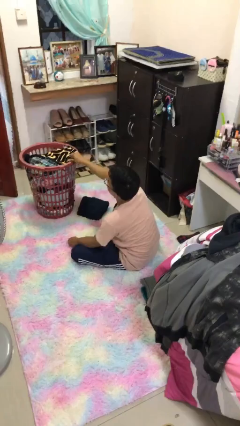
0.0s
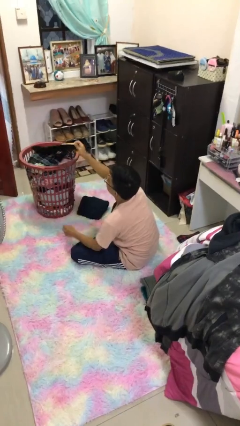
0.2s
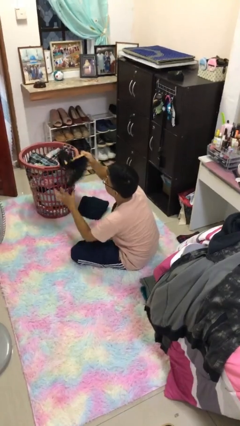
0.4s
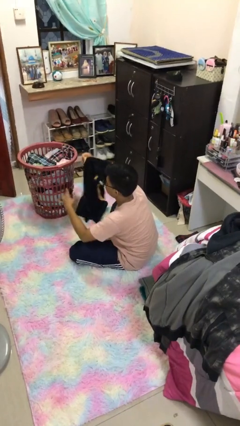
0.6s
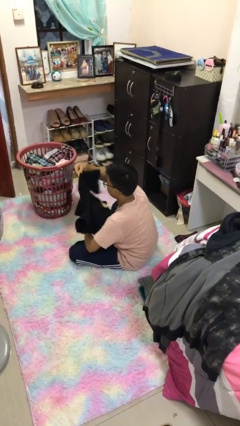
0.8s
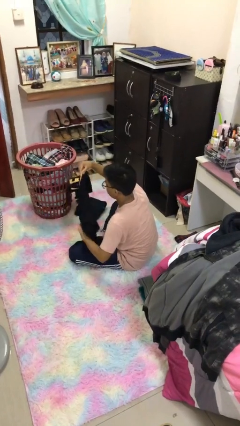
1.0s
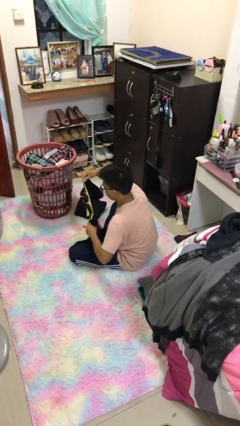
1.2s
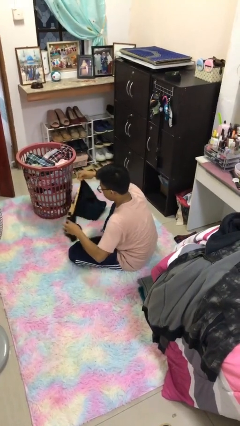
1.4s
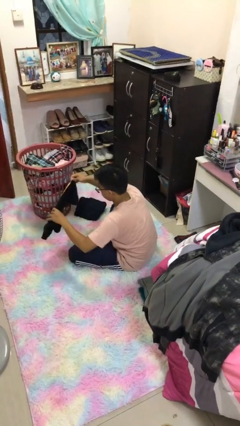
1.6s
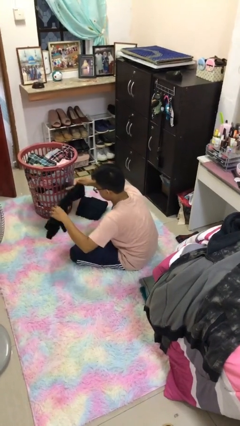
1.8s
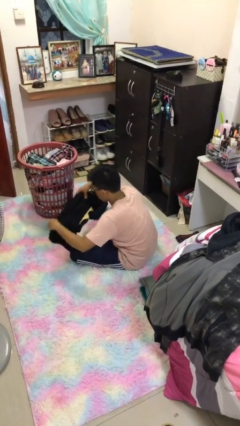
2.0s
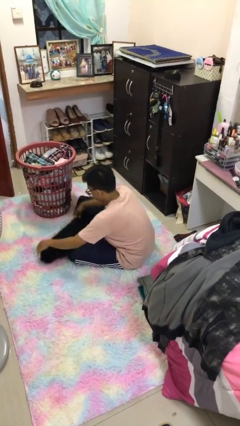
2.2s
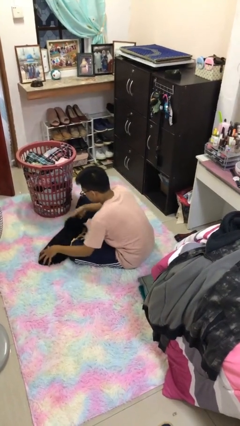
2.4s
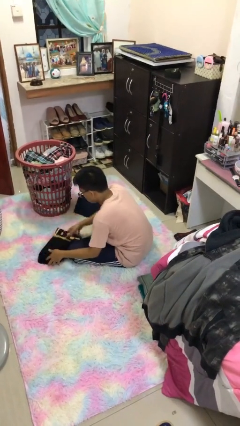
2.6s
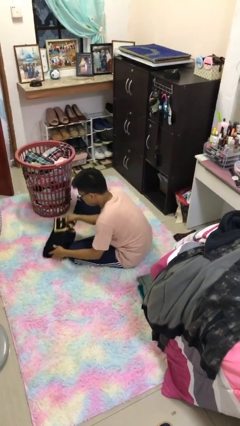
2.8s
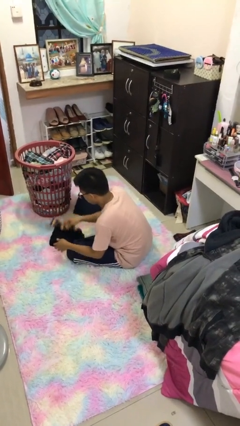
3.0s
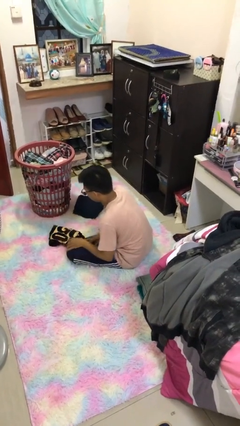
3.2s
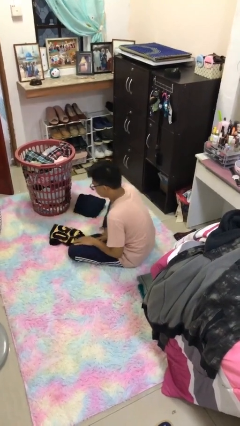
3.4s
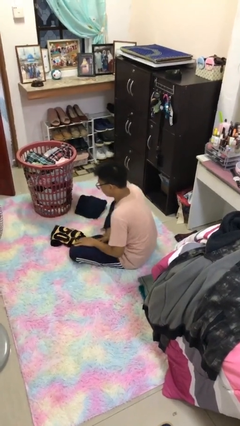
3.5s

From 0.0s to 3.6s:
person folds shirt

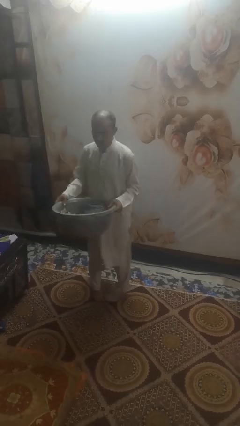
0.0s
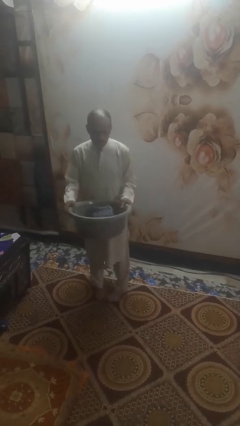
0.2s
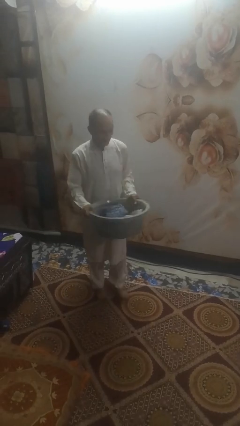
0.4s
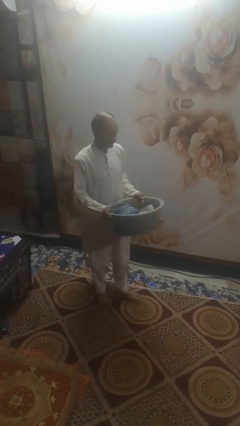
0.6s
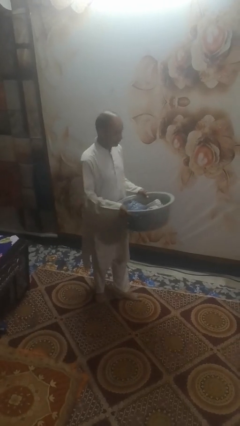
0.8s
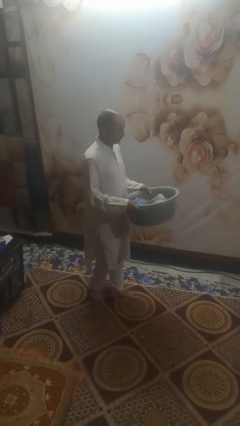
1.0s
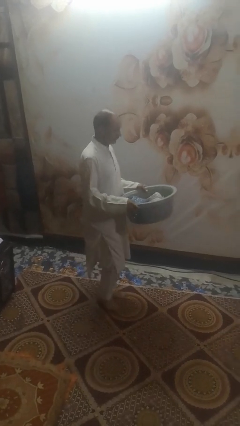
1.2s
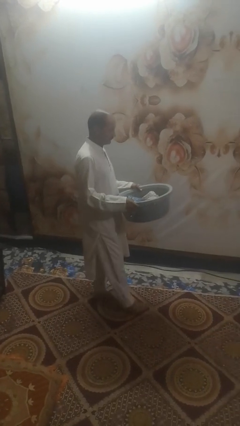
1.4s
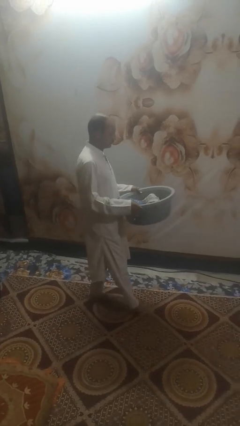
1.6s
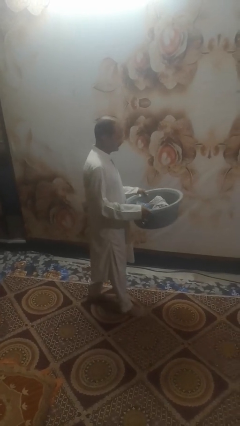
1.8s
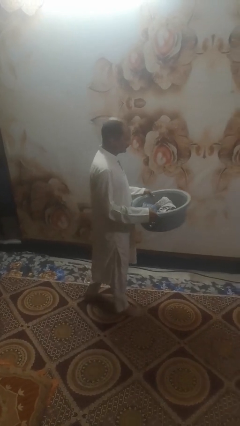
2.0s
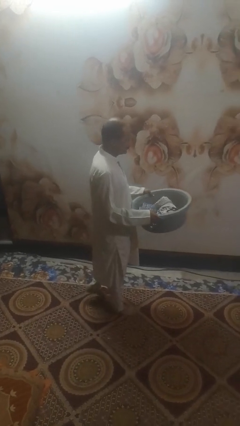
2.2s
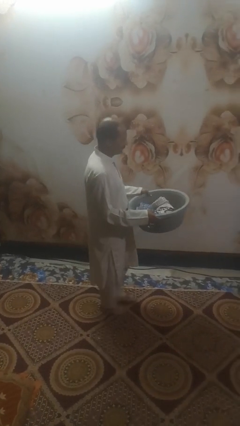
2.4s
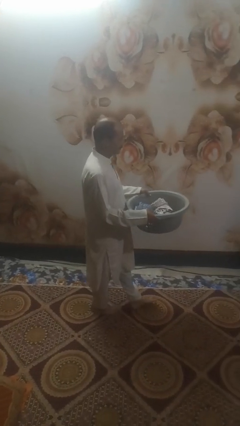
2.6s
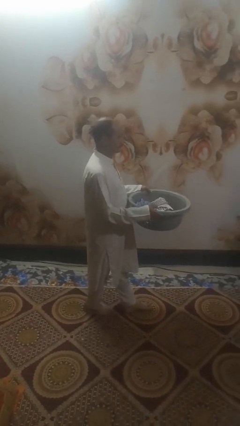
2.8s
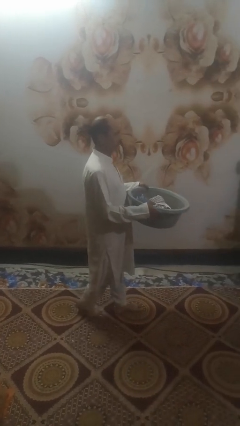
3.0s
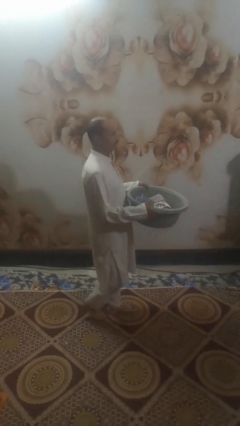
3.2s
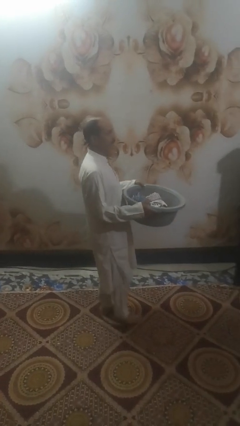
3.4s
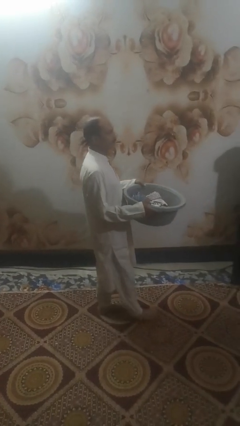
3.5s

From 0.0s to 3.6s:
person carries laundry basket

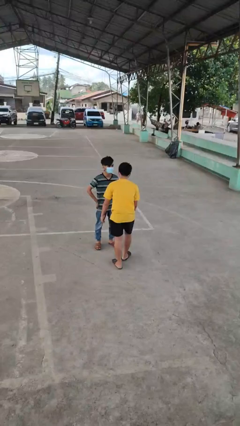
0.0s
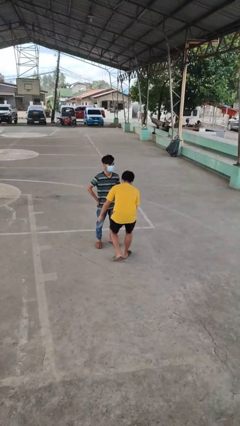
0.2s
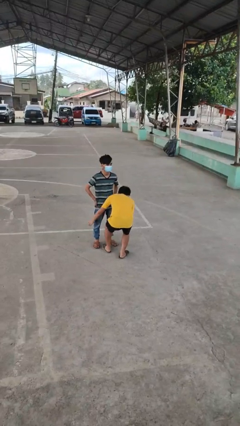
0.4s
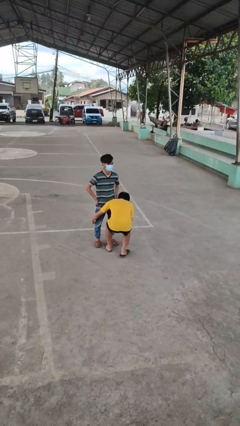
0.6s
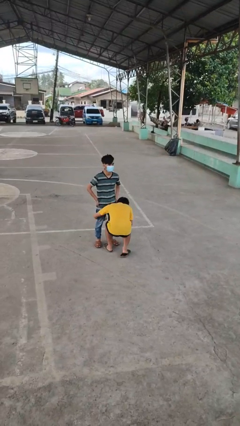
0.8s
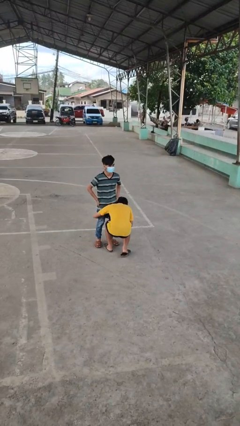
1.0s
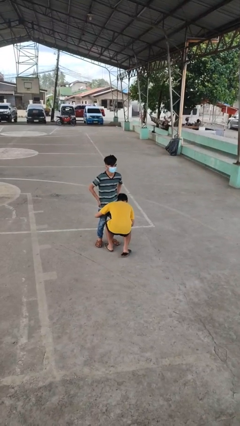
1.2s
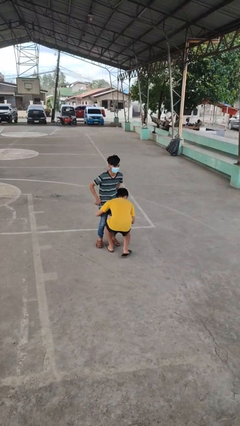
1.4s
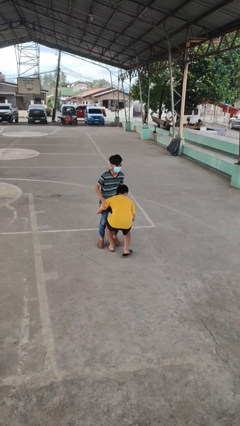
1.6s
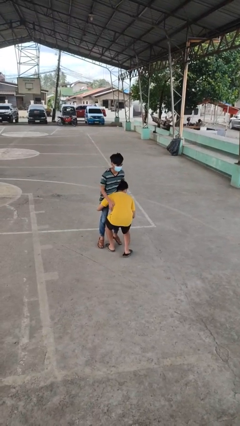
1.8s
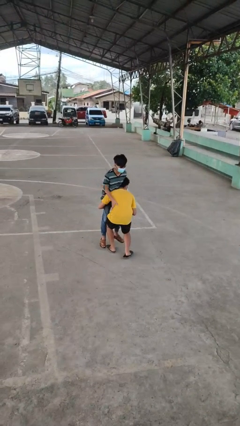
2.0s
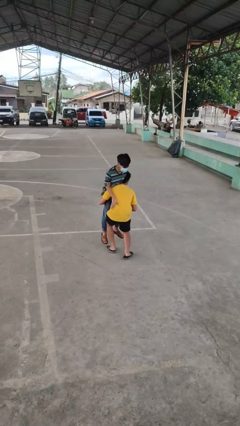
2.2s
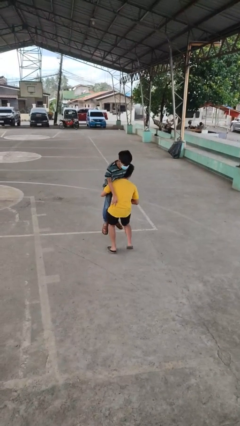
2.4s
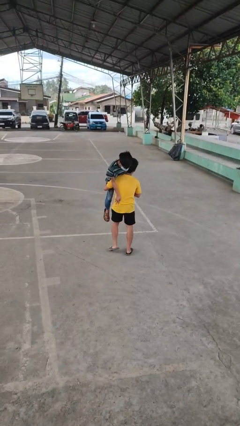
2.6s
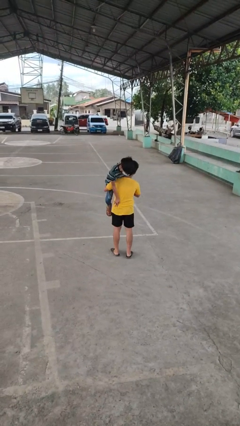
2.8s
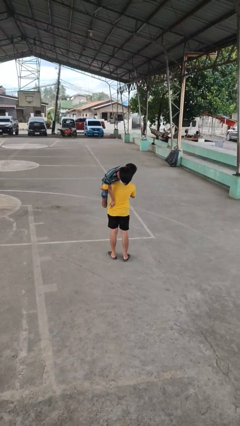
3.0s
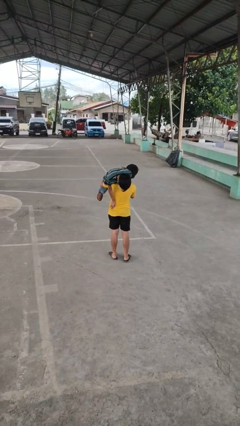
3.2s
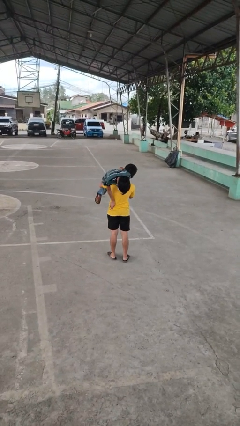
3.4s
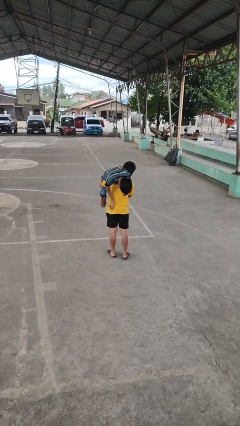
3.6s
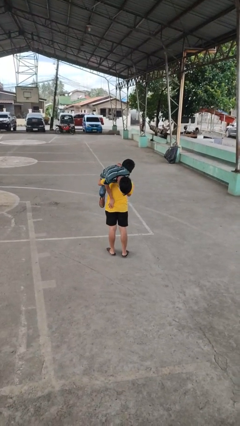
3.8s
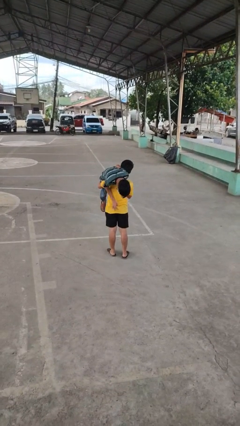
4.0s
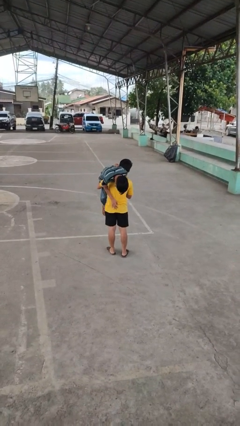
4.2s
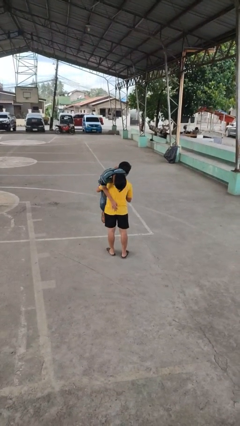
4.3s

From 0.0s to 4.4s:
person carries person over shoulder

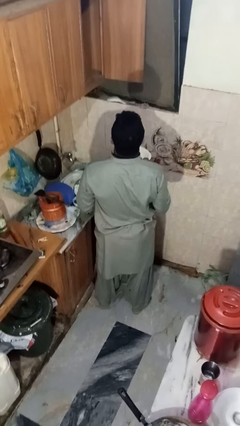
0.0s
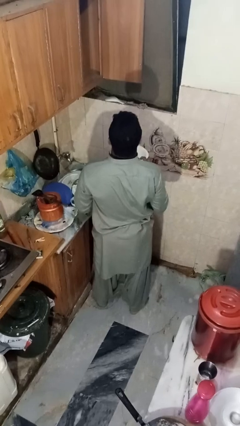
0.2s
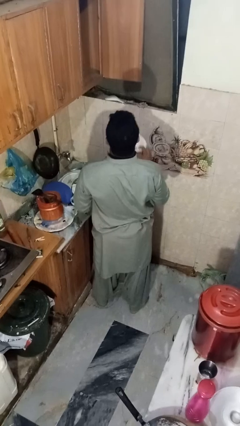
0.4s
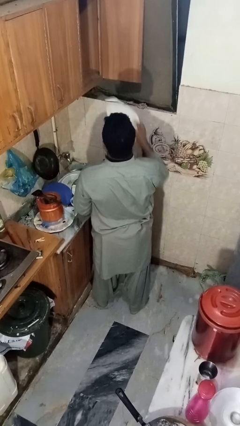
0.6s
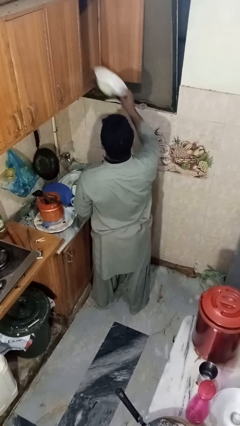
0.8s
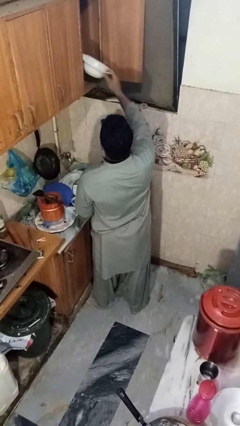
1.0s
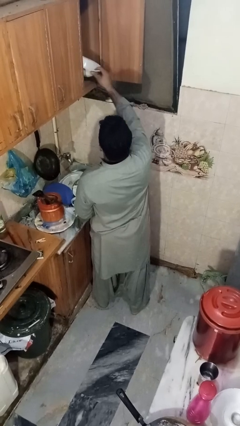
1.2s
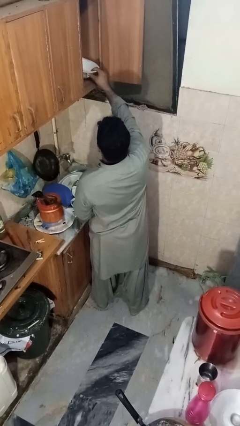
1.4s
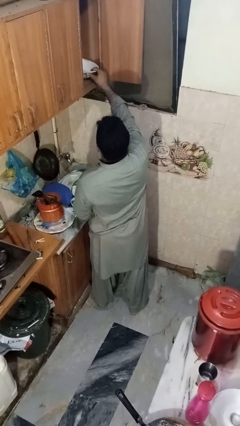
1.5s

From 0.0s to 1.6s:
person puts object in cabinet

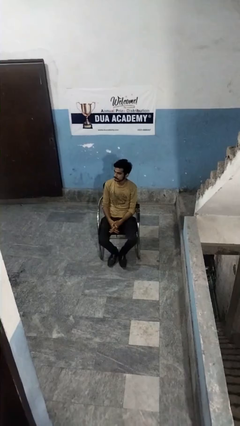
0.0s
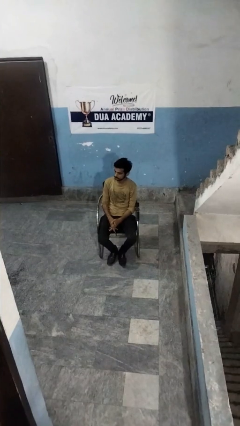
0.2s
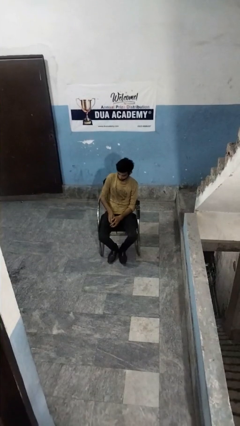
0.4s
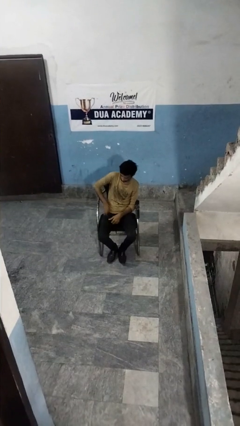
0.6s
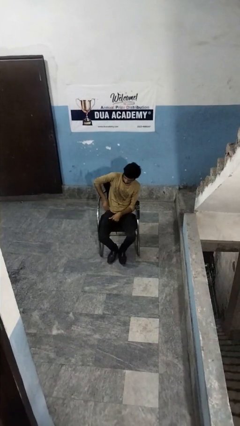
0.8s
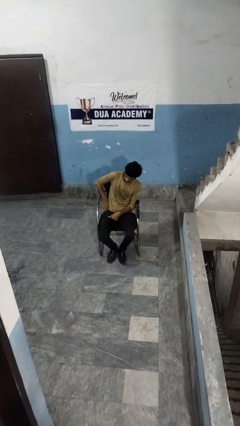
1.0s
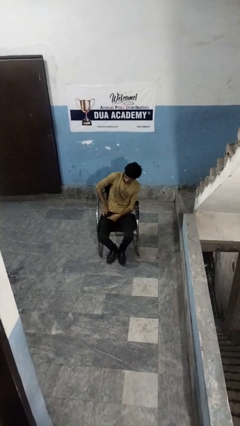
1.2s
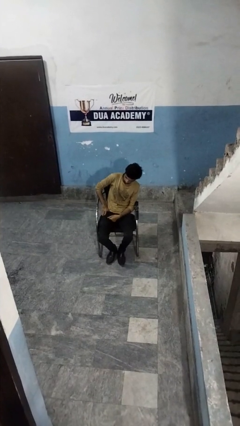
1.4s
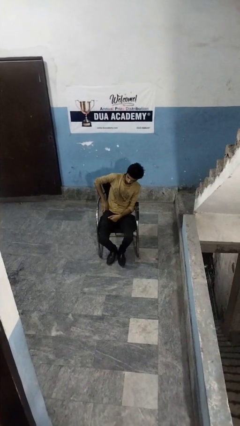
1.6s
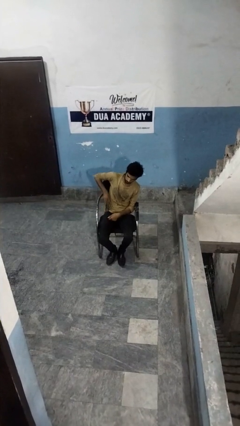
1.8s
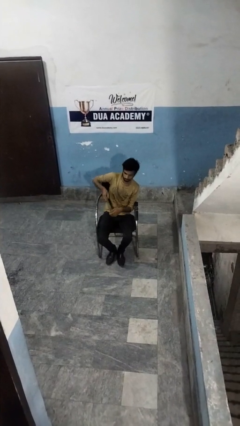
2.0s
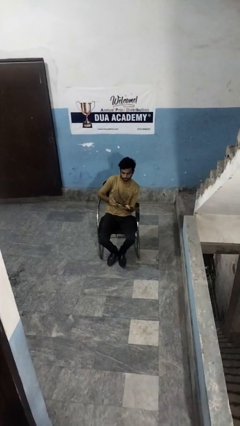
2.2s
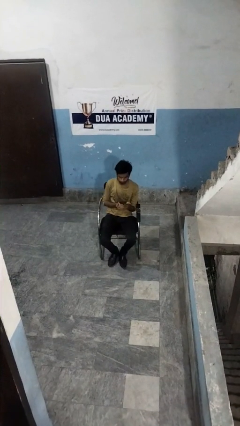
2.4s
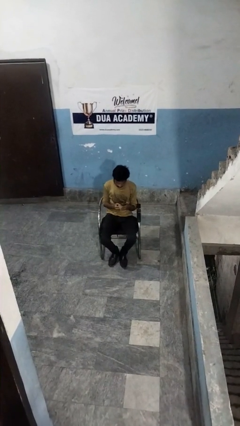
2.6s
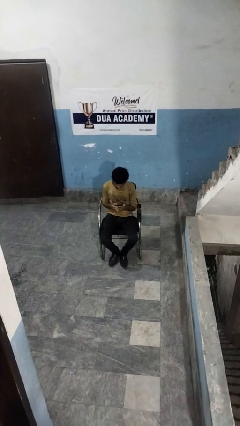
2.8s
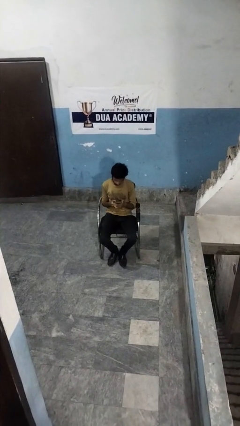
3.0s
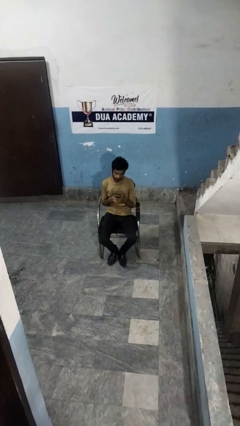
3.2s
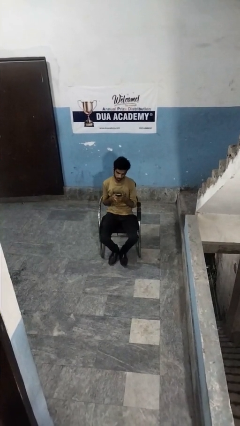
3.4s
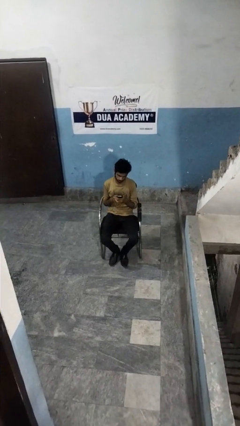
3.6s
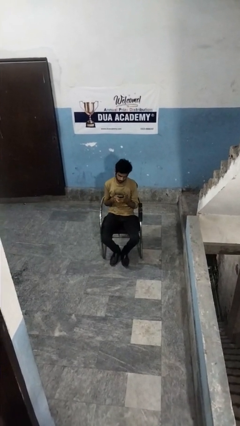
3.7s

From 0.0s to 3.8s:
person takes phone from pocket

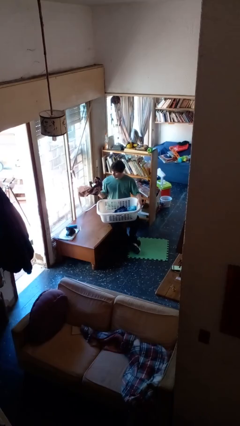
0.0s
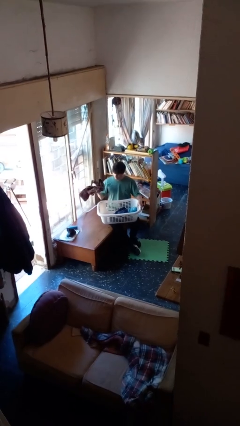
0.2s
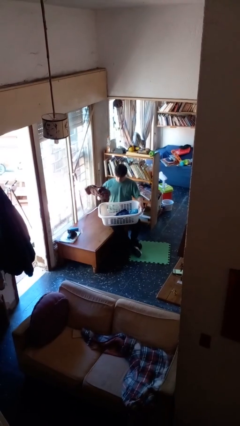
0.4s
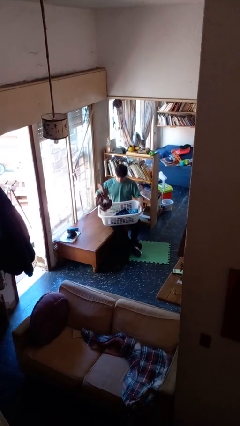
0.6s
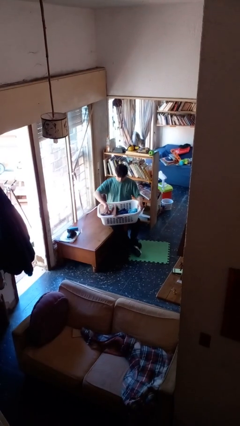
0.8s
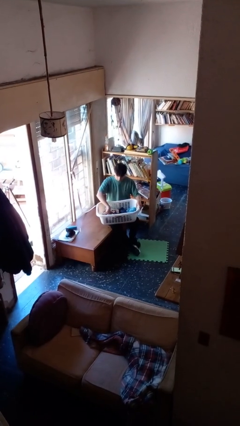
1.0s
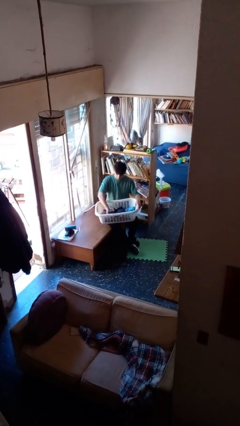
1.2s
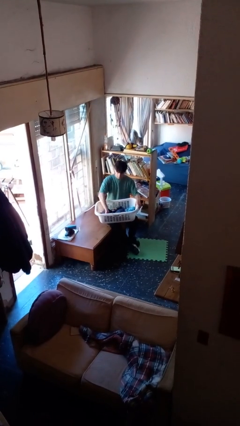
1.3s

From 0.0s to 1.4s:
person puts object into basket
